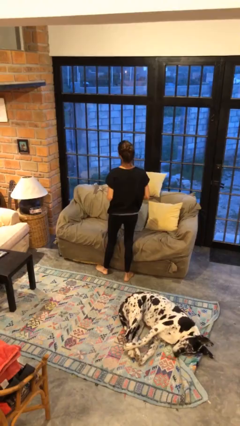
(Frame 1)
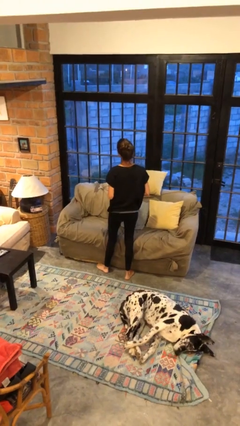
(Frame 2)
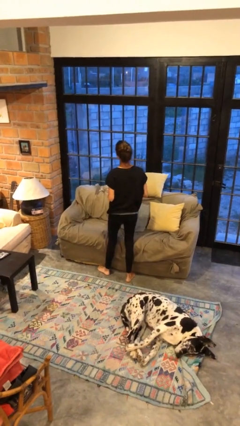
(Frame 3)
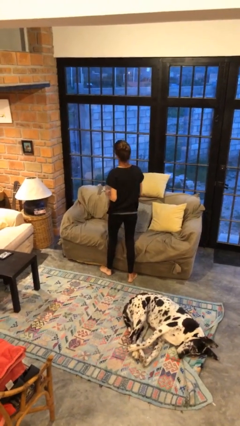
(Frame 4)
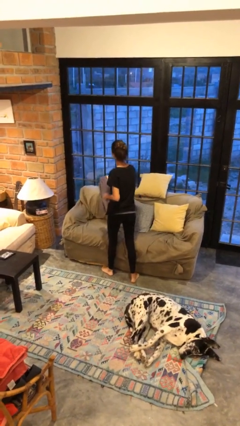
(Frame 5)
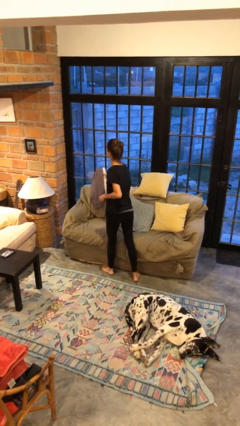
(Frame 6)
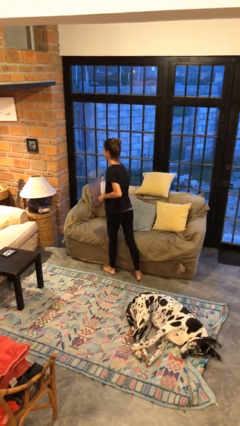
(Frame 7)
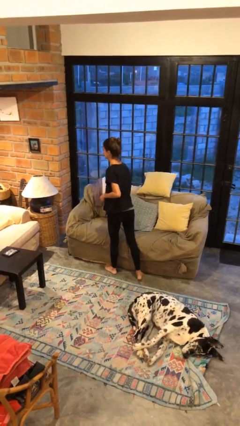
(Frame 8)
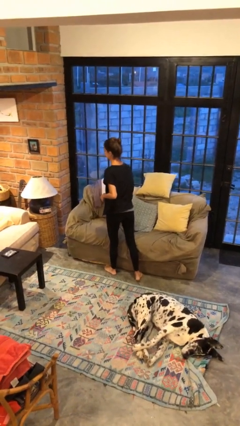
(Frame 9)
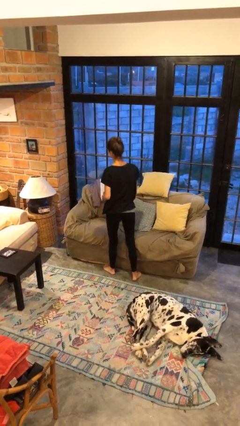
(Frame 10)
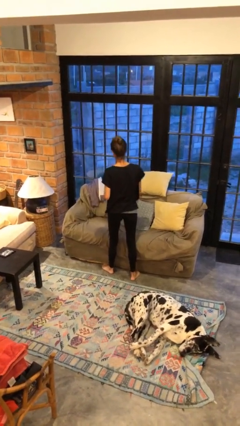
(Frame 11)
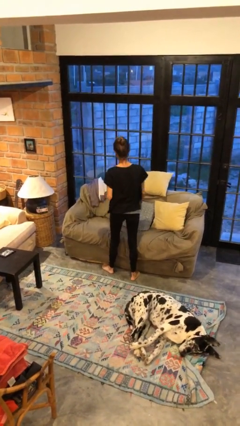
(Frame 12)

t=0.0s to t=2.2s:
person puts down object on couch

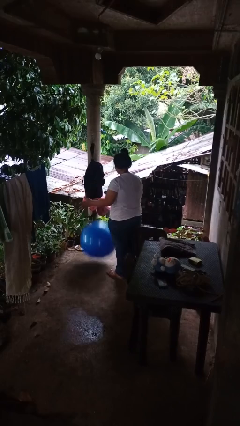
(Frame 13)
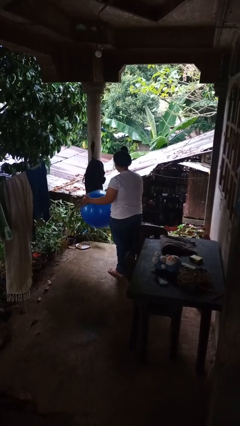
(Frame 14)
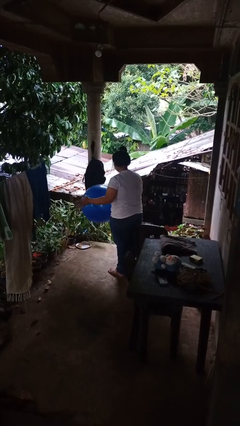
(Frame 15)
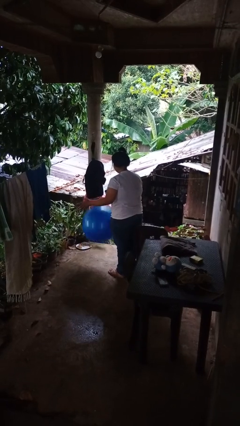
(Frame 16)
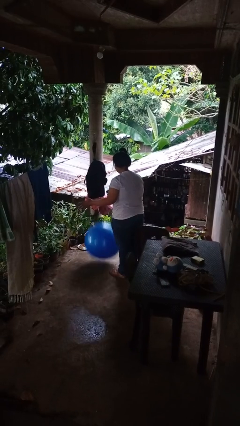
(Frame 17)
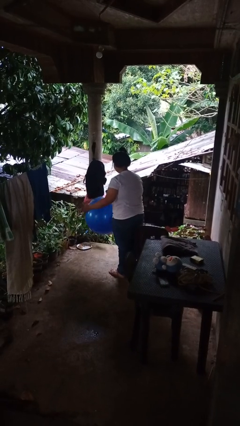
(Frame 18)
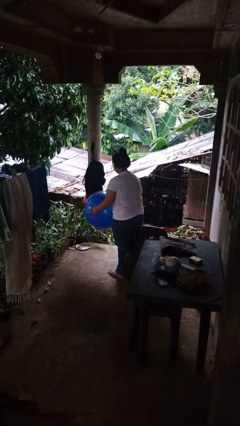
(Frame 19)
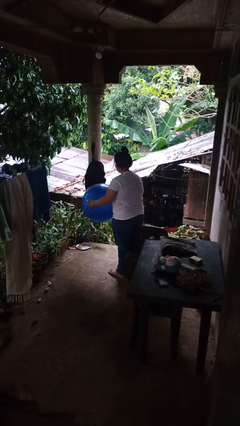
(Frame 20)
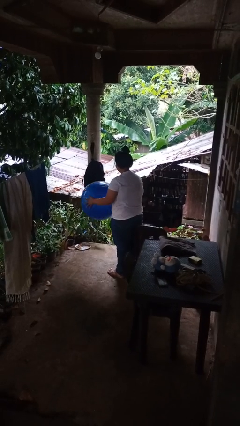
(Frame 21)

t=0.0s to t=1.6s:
person bounces ball on floor

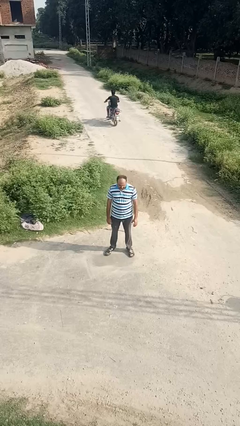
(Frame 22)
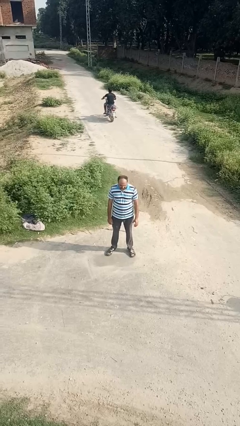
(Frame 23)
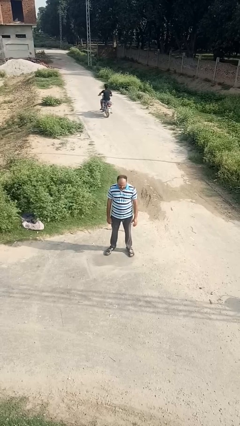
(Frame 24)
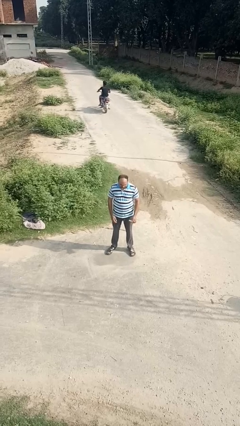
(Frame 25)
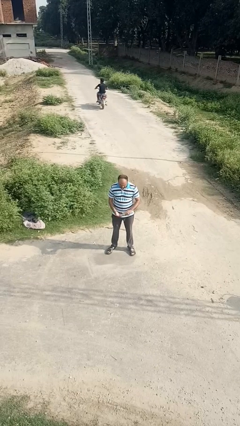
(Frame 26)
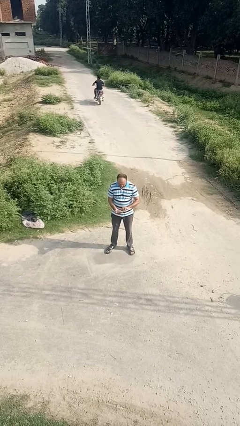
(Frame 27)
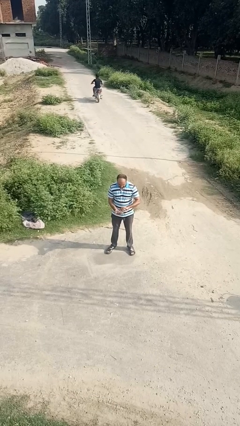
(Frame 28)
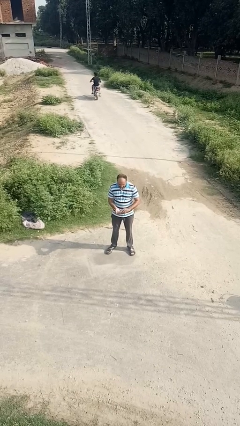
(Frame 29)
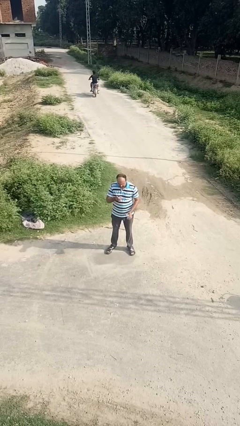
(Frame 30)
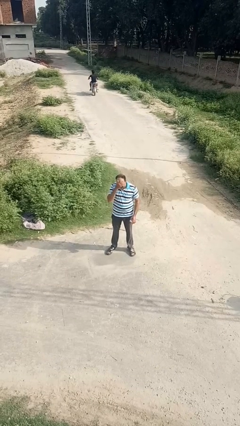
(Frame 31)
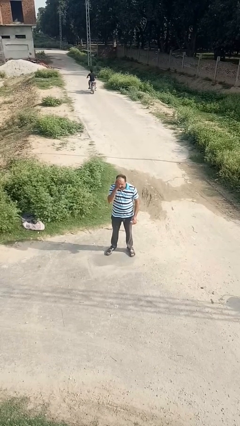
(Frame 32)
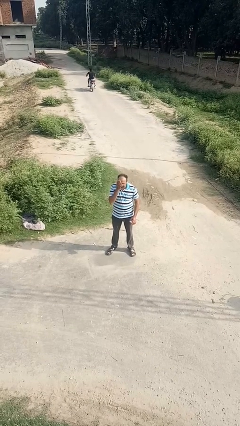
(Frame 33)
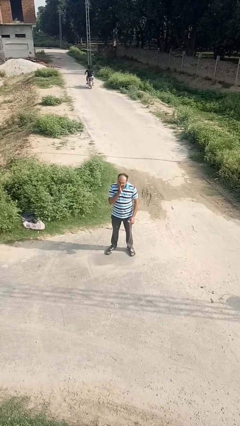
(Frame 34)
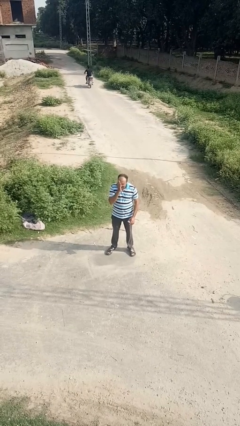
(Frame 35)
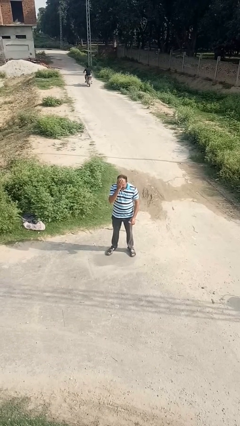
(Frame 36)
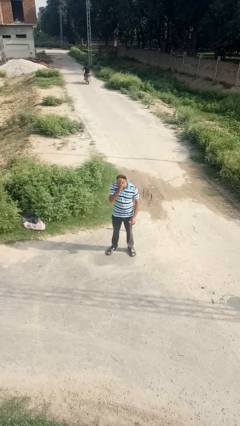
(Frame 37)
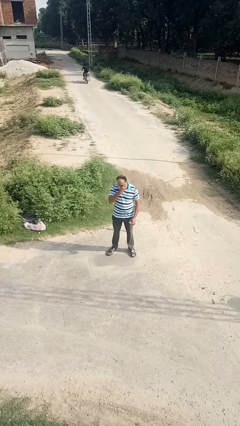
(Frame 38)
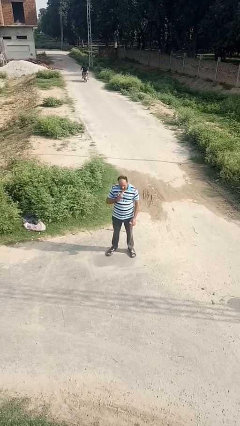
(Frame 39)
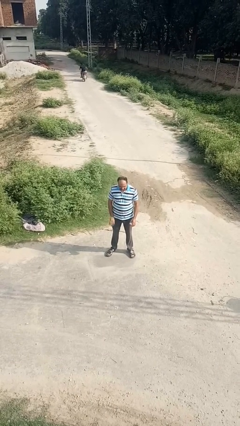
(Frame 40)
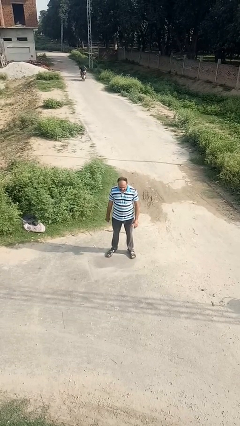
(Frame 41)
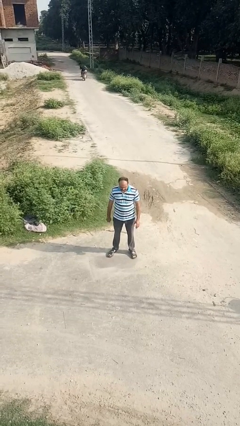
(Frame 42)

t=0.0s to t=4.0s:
person applies facial moisturizer

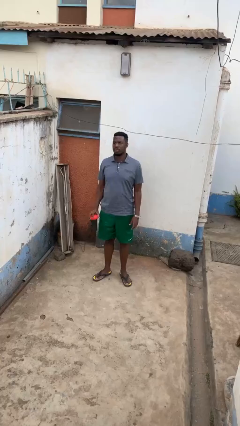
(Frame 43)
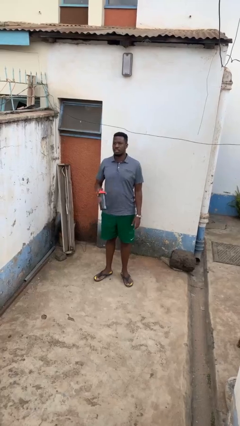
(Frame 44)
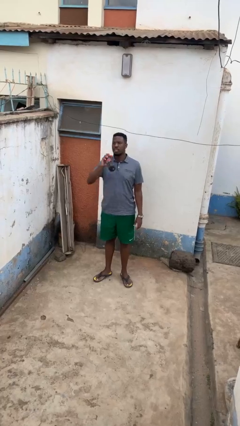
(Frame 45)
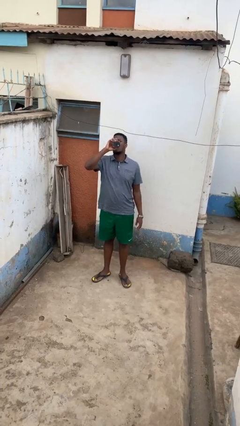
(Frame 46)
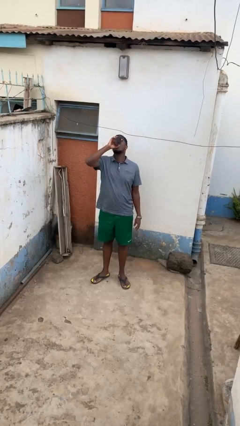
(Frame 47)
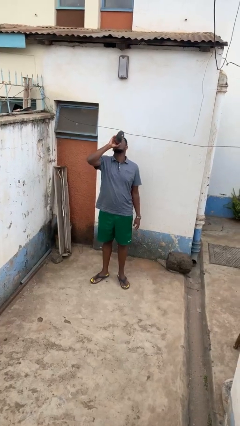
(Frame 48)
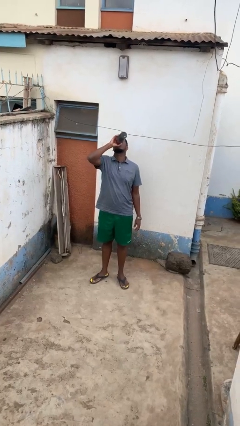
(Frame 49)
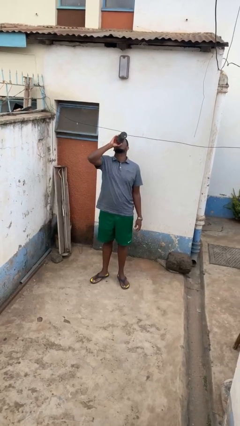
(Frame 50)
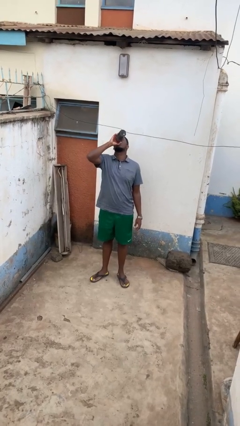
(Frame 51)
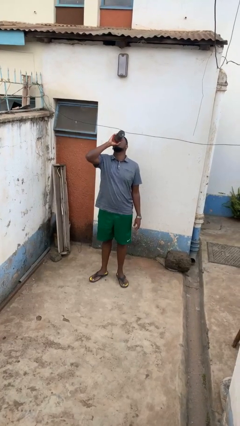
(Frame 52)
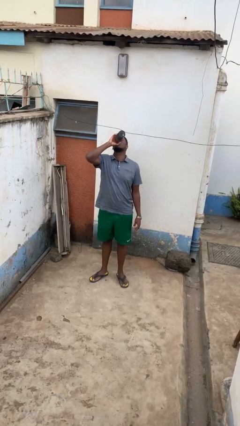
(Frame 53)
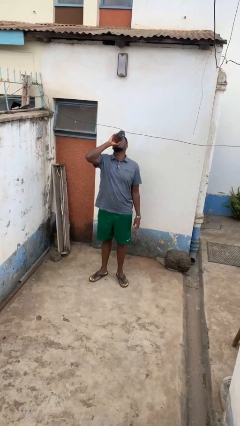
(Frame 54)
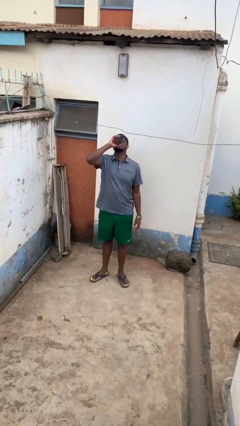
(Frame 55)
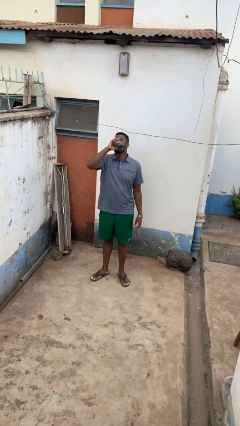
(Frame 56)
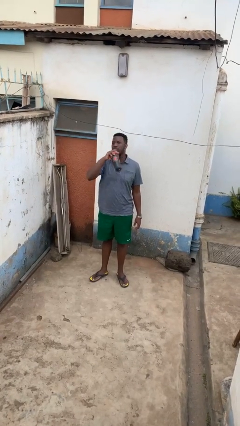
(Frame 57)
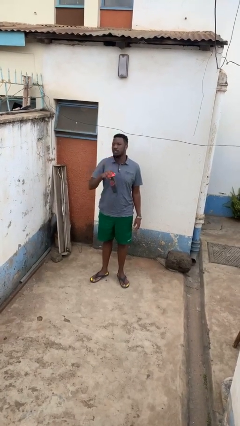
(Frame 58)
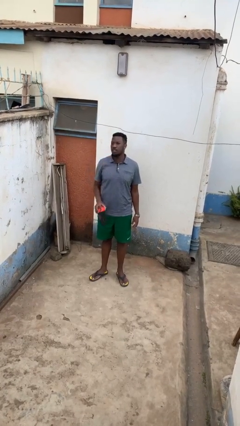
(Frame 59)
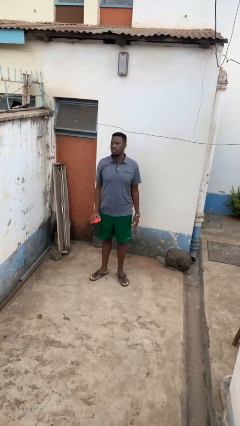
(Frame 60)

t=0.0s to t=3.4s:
person drinks from bottle

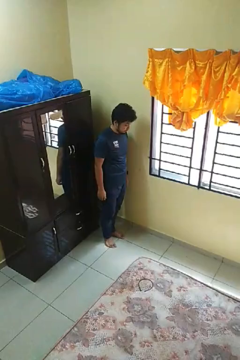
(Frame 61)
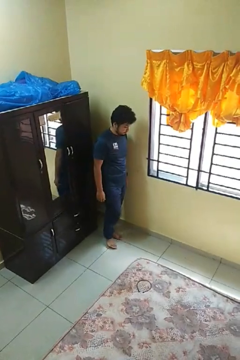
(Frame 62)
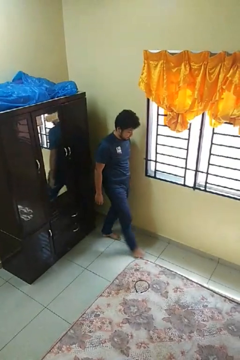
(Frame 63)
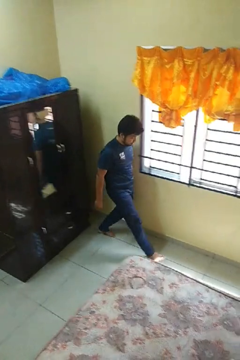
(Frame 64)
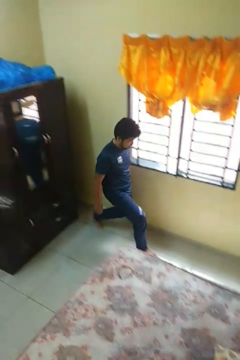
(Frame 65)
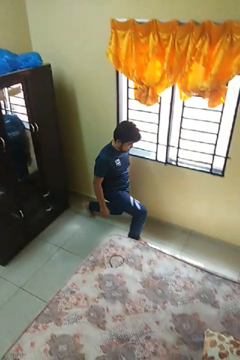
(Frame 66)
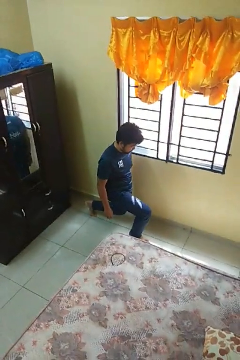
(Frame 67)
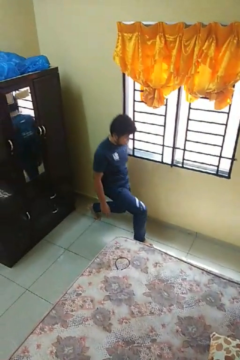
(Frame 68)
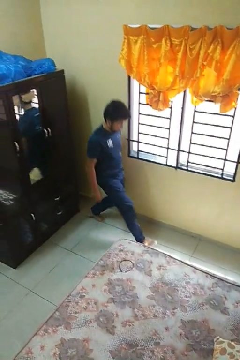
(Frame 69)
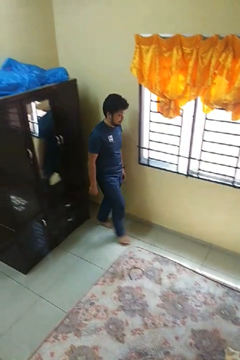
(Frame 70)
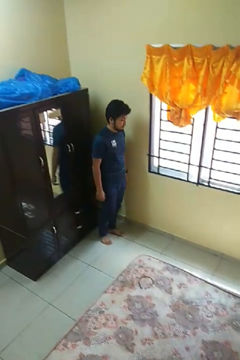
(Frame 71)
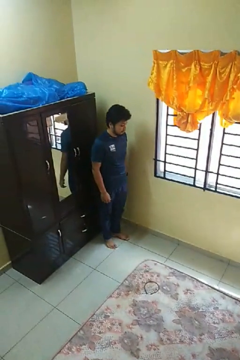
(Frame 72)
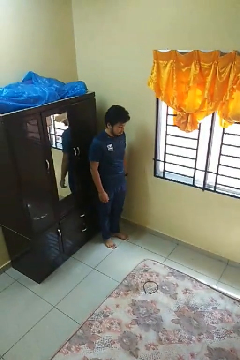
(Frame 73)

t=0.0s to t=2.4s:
person exercises with lunges

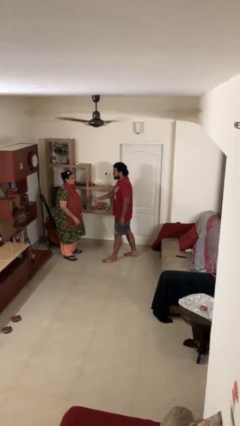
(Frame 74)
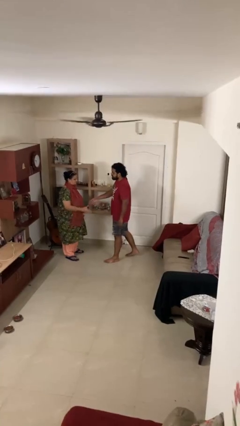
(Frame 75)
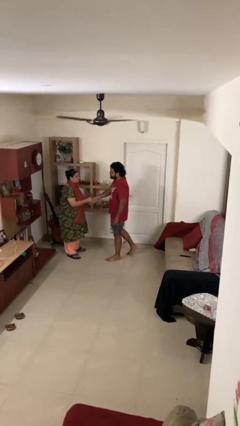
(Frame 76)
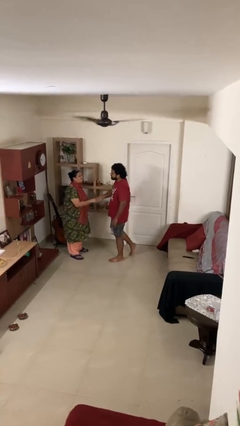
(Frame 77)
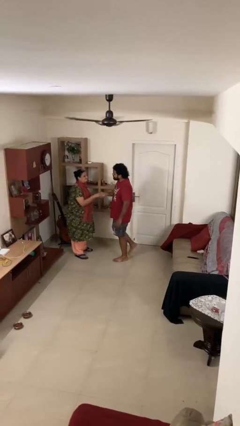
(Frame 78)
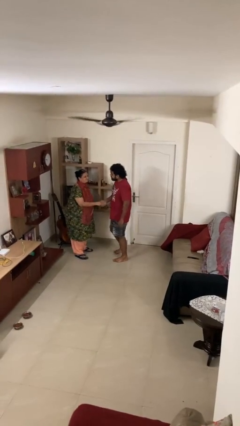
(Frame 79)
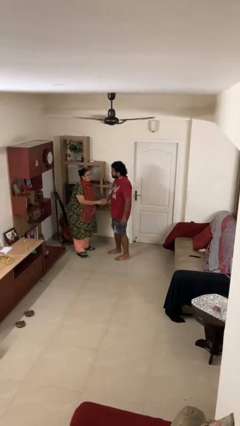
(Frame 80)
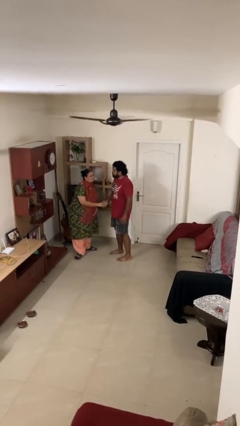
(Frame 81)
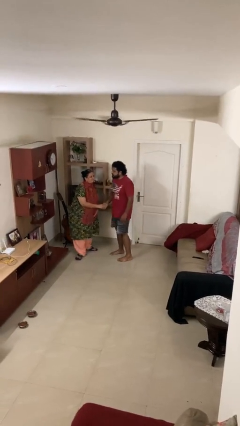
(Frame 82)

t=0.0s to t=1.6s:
person shakes hand

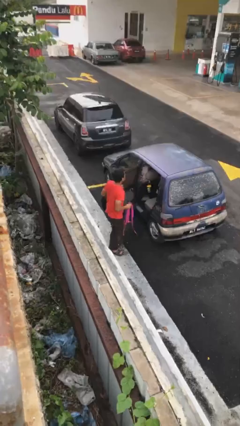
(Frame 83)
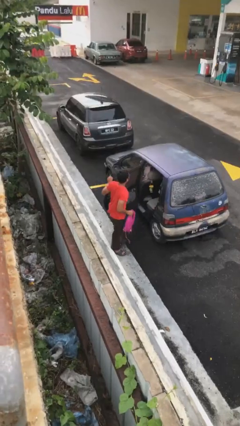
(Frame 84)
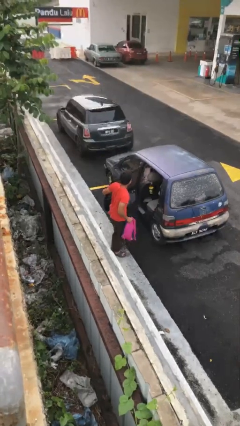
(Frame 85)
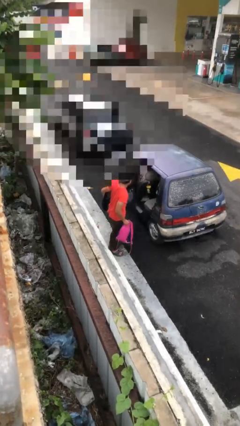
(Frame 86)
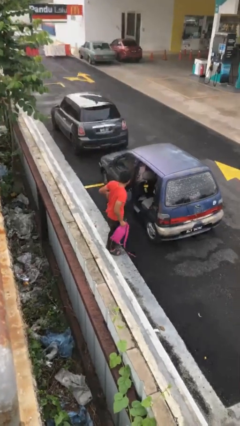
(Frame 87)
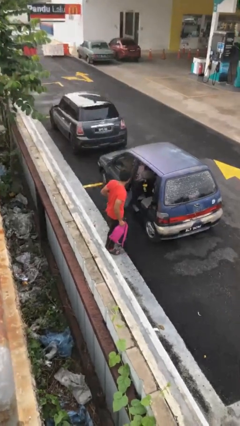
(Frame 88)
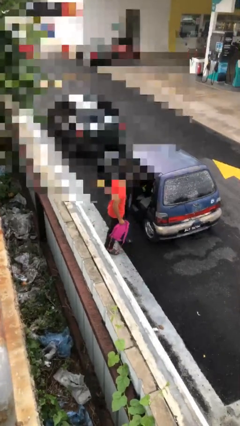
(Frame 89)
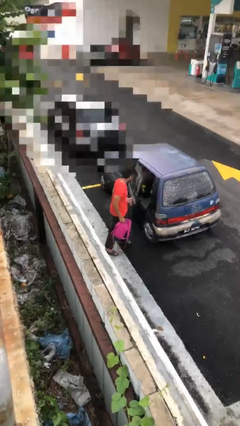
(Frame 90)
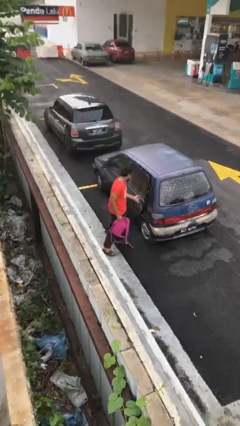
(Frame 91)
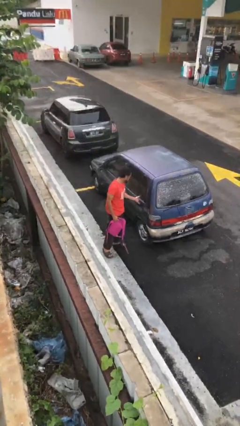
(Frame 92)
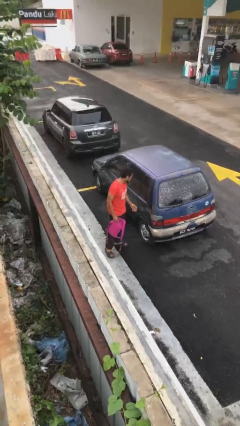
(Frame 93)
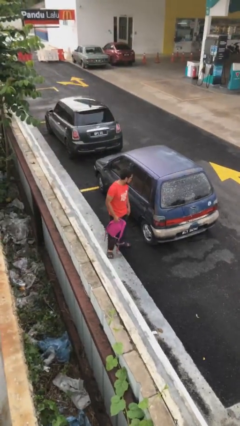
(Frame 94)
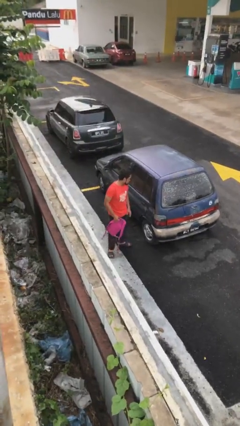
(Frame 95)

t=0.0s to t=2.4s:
person closes car door
